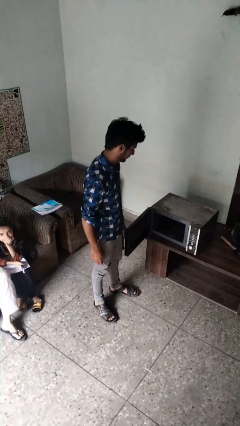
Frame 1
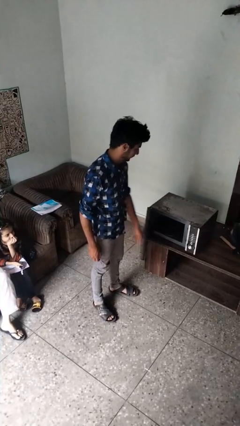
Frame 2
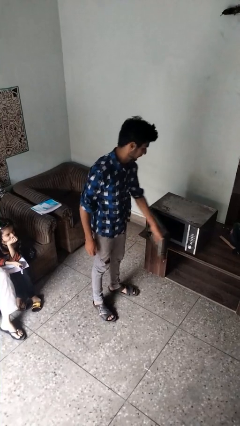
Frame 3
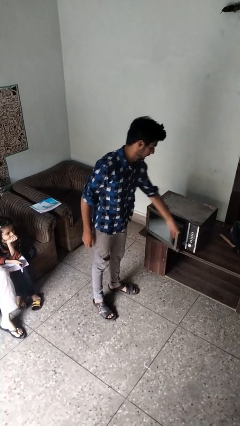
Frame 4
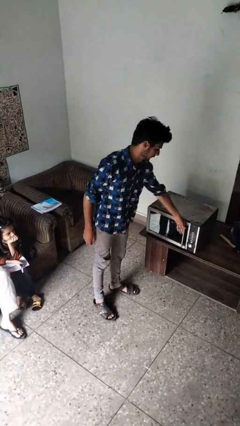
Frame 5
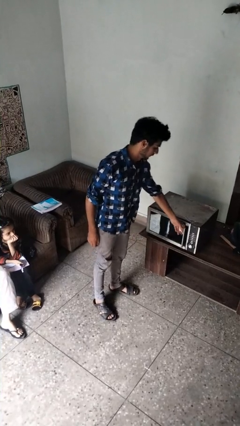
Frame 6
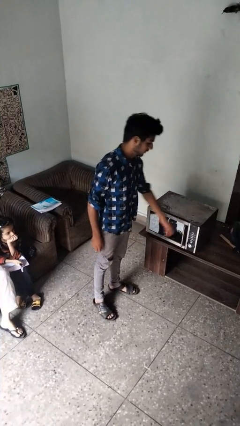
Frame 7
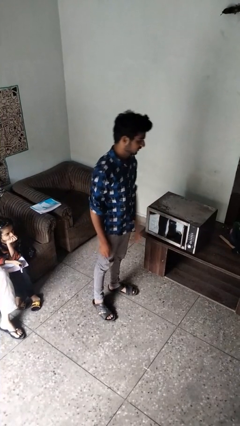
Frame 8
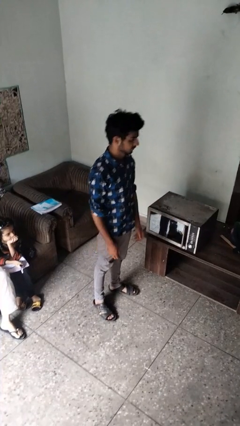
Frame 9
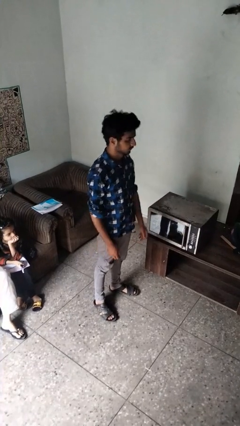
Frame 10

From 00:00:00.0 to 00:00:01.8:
person closes microwave

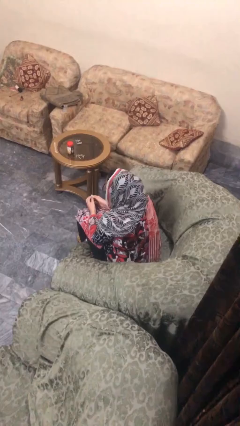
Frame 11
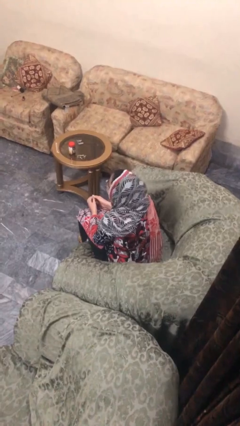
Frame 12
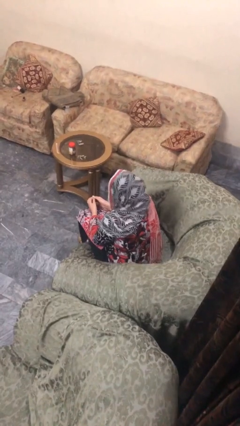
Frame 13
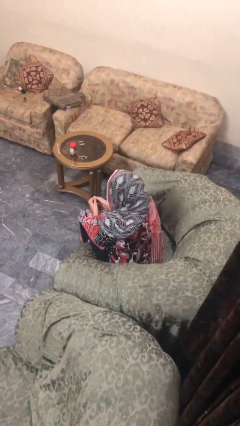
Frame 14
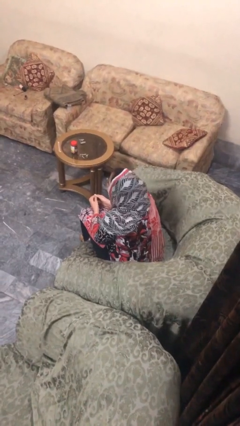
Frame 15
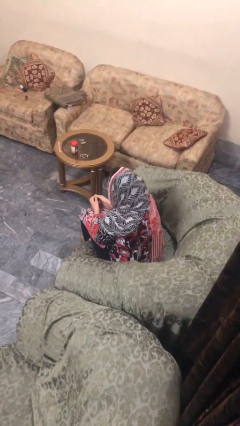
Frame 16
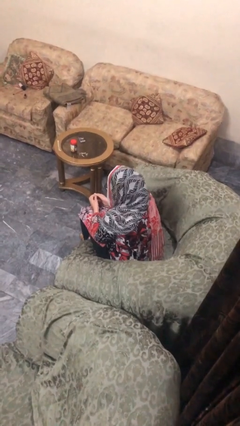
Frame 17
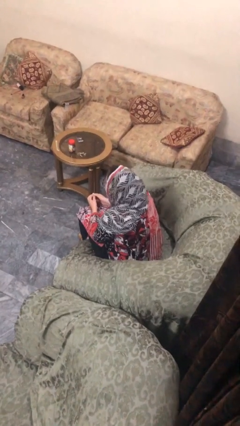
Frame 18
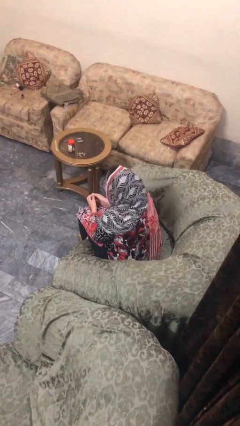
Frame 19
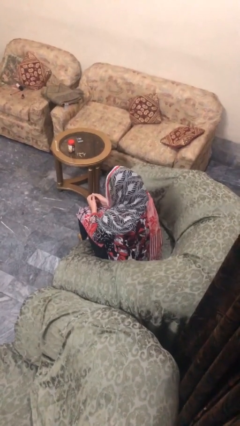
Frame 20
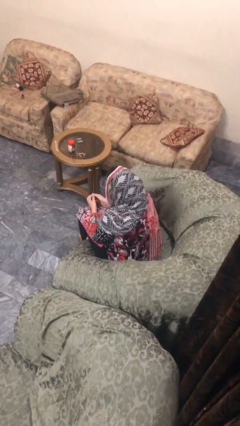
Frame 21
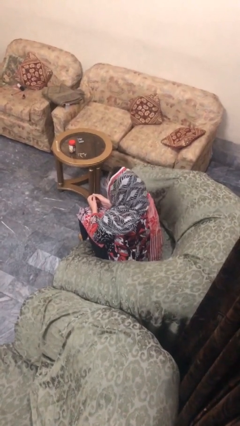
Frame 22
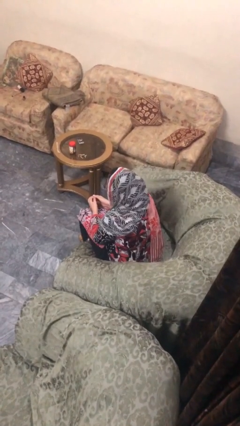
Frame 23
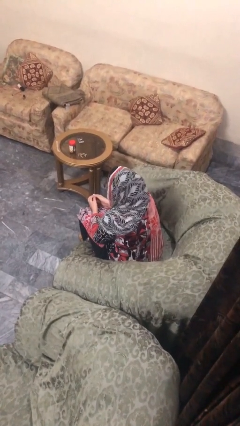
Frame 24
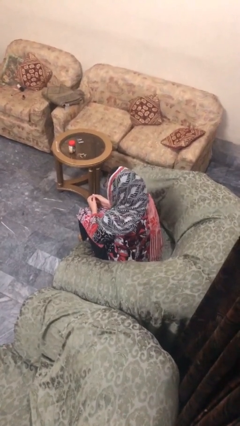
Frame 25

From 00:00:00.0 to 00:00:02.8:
person nods head

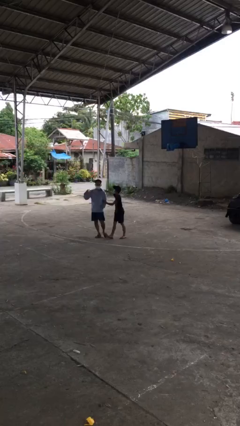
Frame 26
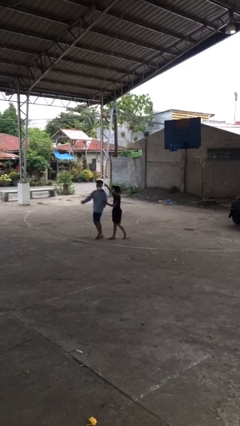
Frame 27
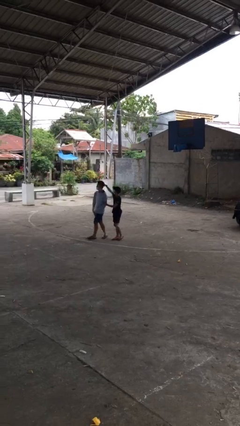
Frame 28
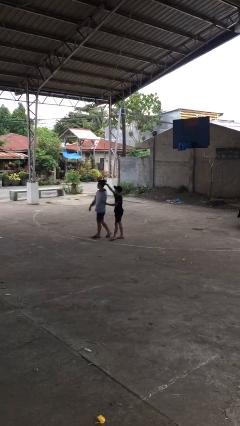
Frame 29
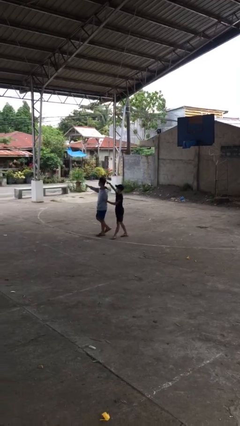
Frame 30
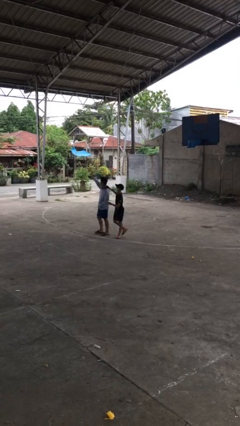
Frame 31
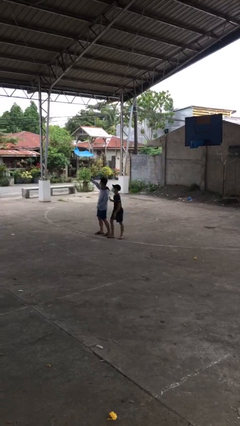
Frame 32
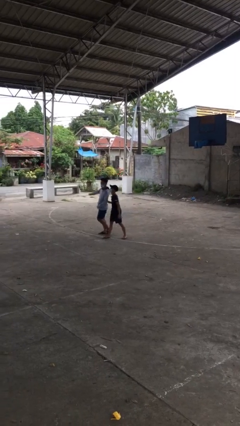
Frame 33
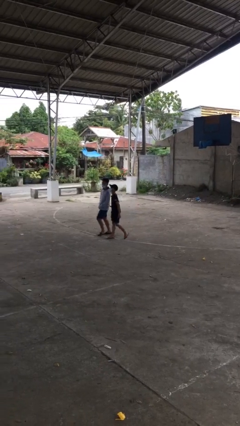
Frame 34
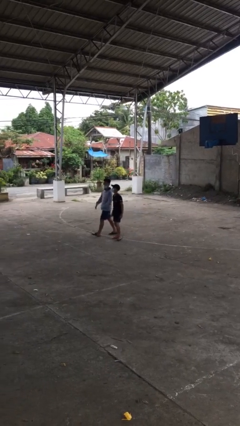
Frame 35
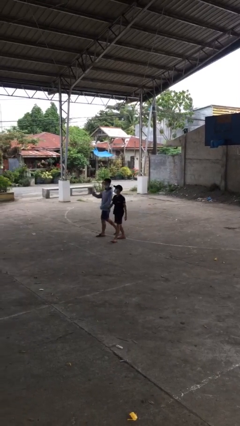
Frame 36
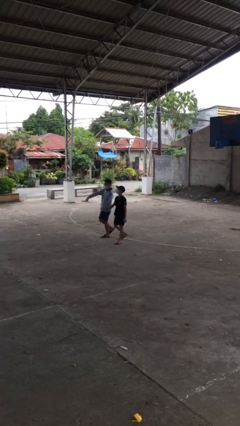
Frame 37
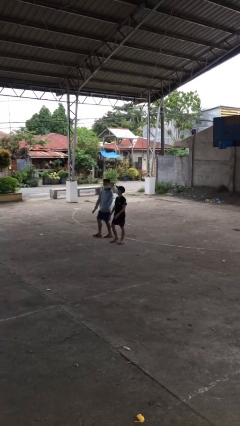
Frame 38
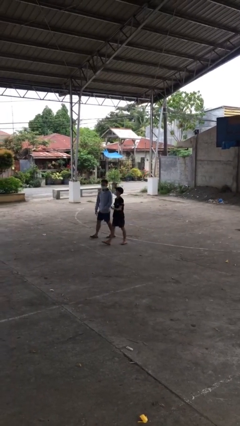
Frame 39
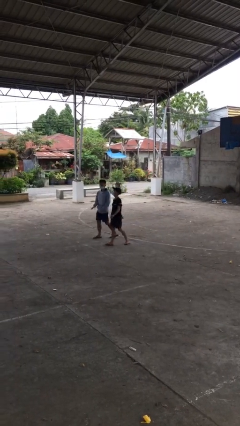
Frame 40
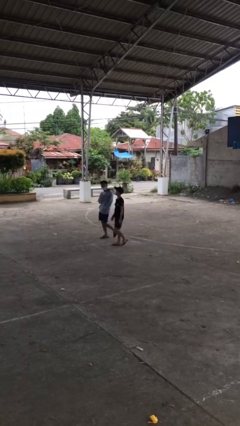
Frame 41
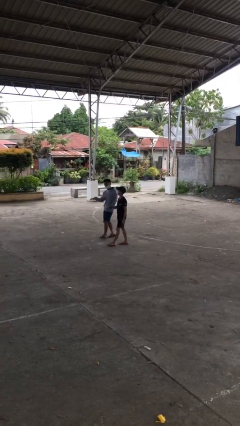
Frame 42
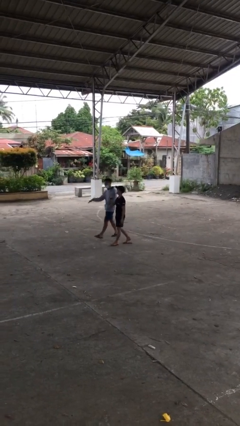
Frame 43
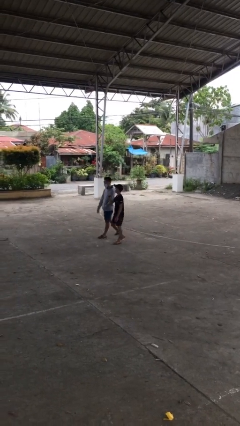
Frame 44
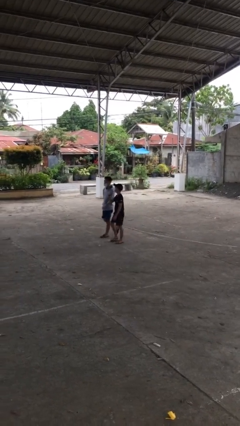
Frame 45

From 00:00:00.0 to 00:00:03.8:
person talks to person

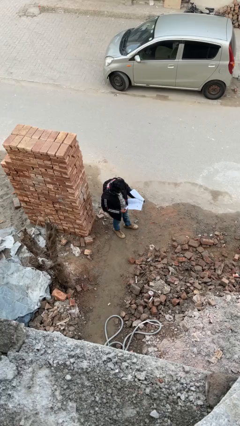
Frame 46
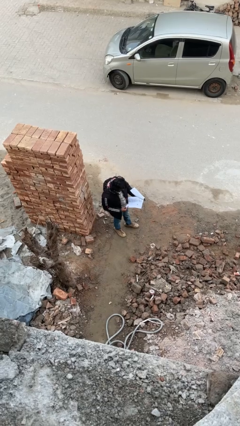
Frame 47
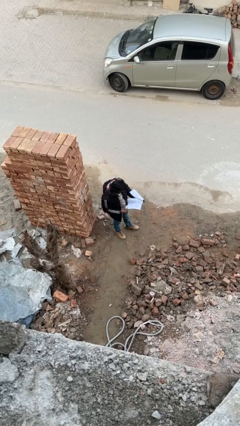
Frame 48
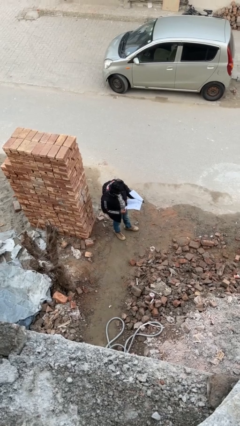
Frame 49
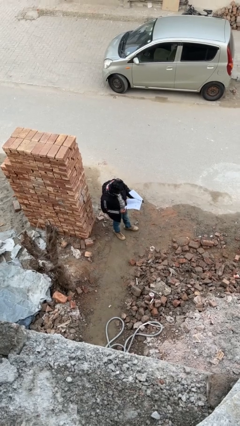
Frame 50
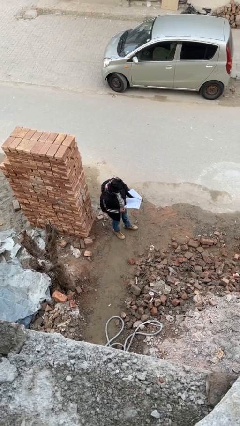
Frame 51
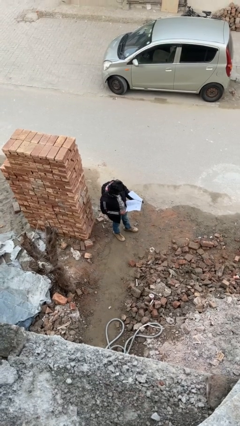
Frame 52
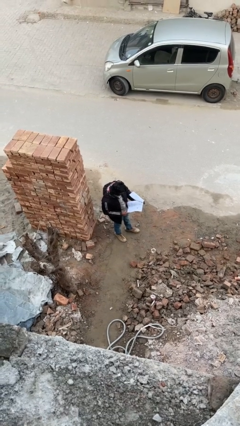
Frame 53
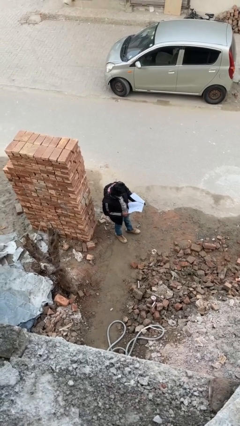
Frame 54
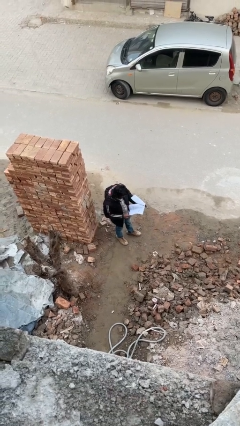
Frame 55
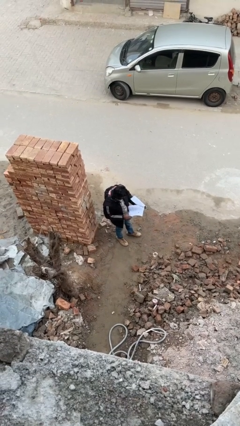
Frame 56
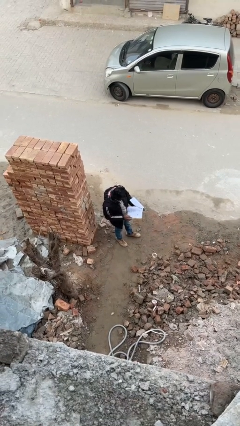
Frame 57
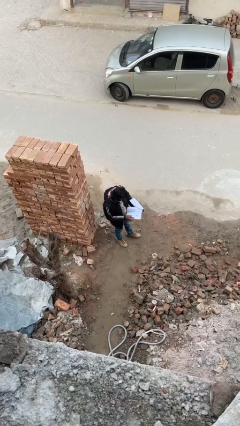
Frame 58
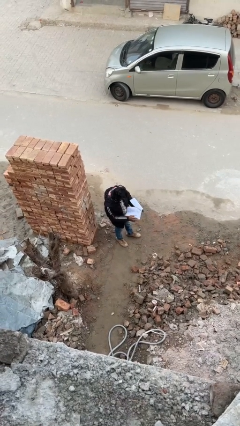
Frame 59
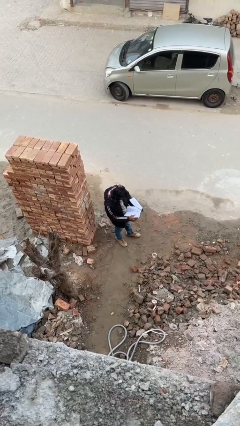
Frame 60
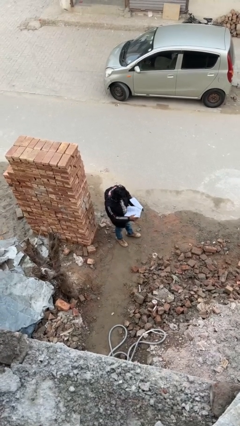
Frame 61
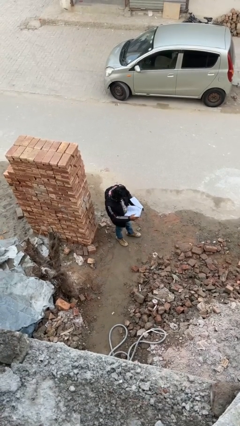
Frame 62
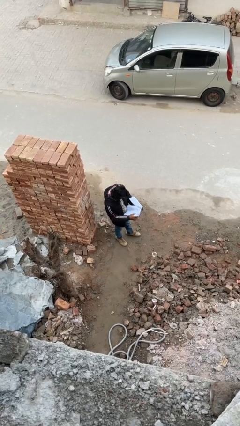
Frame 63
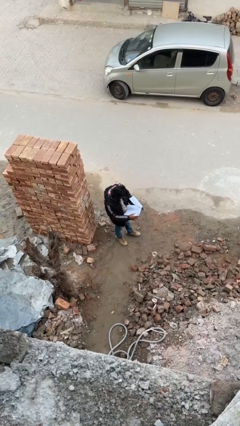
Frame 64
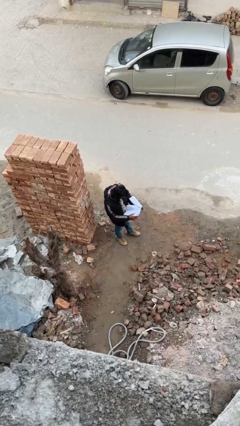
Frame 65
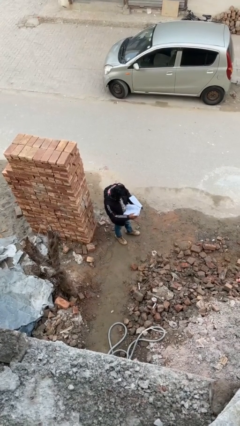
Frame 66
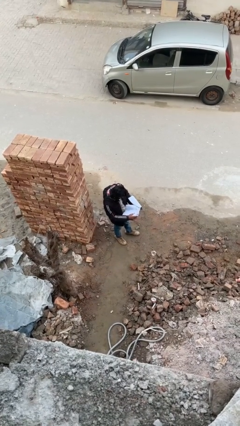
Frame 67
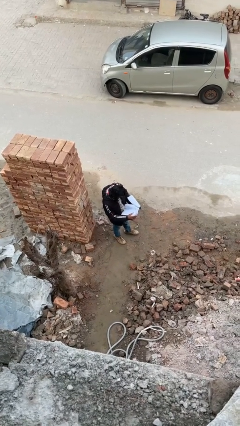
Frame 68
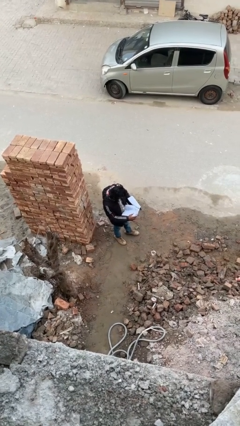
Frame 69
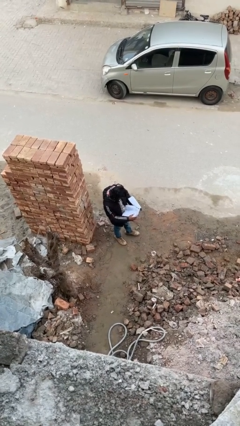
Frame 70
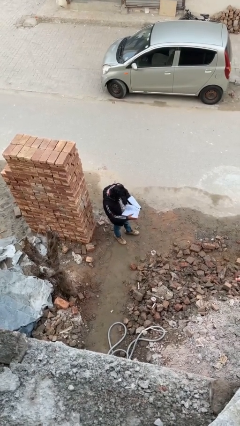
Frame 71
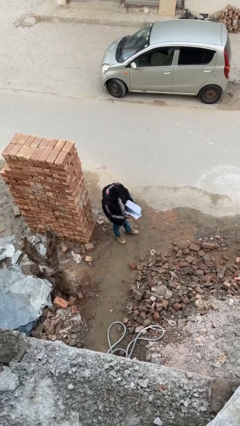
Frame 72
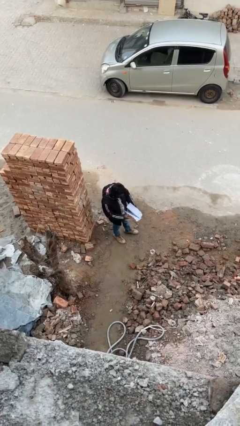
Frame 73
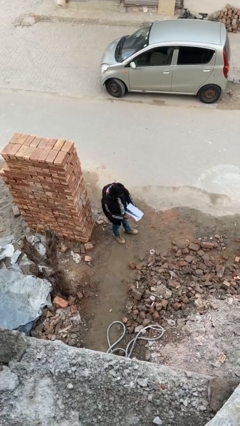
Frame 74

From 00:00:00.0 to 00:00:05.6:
person reads document

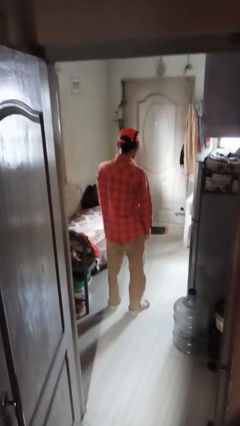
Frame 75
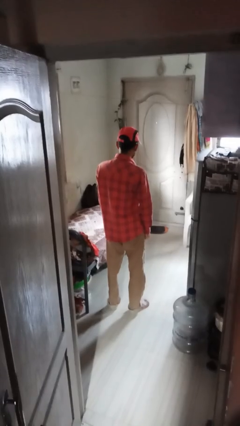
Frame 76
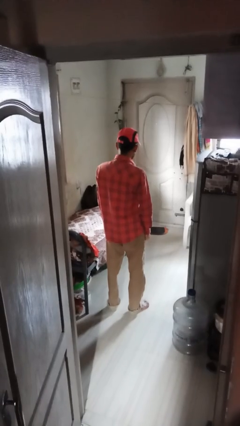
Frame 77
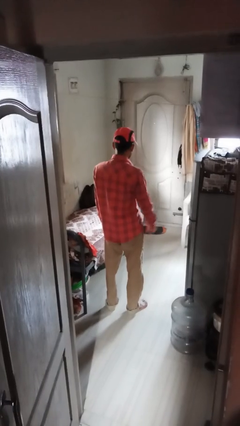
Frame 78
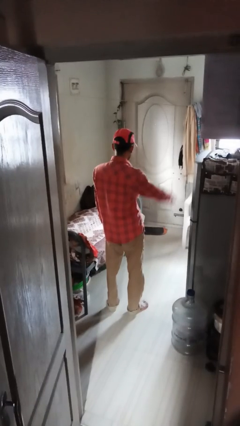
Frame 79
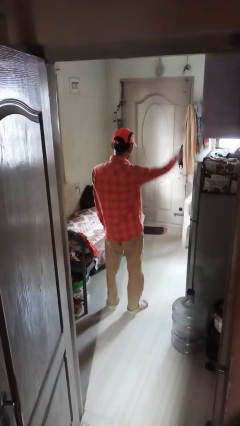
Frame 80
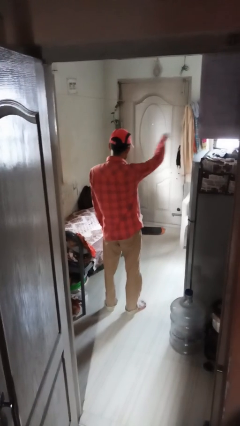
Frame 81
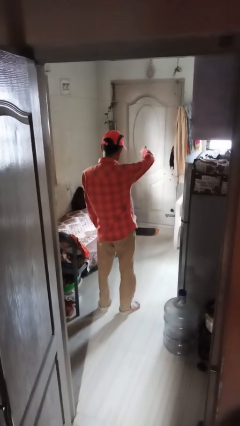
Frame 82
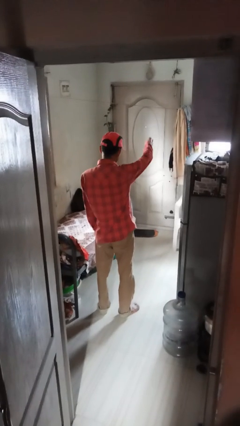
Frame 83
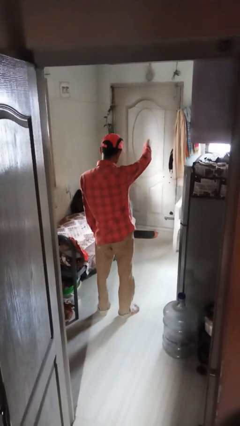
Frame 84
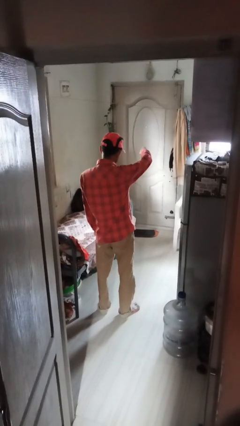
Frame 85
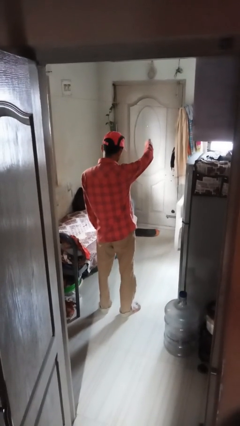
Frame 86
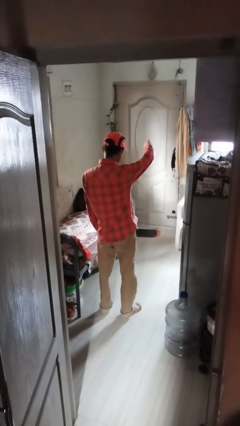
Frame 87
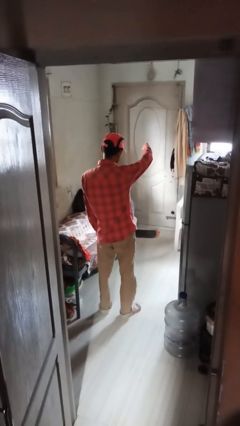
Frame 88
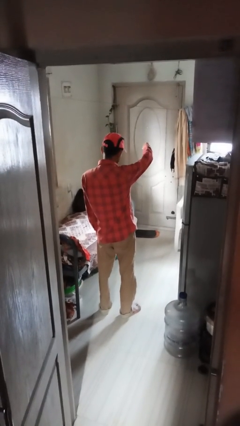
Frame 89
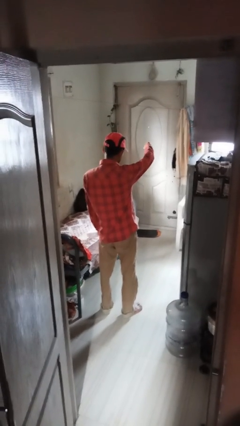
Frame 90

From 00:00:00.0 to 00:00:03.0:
person gestures thumbs down
